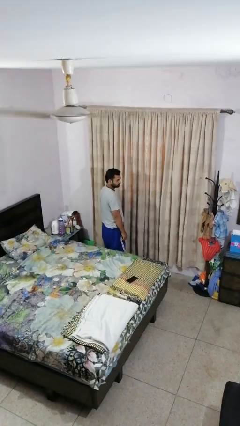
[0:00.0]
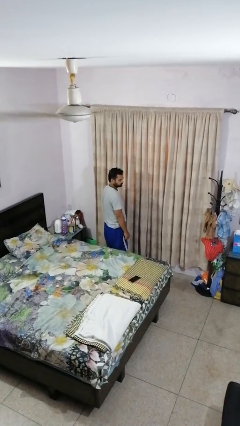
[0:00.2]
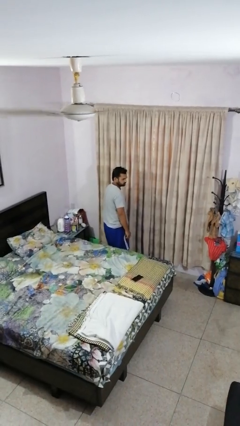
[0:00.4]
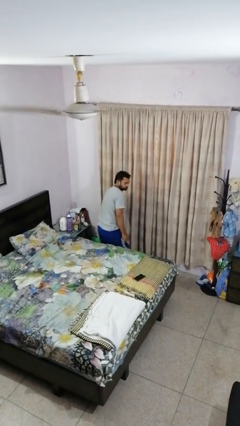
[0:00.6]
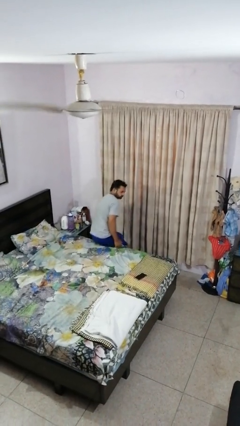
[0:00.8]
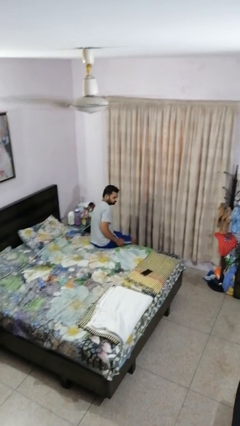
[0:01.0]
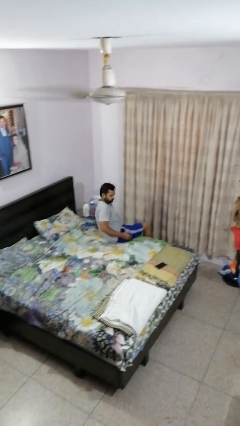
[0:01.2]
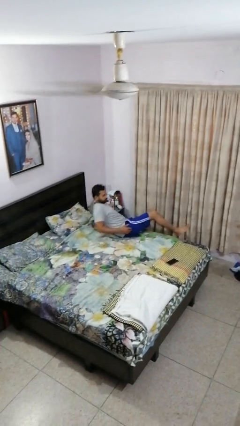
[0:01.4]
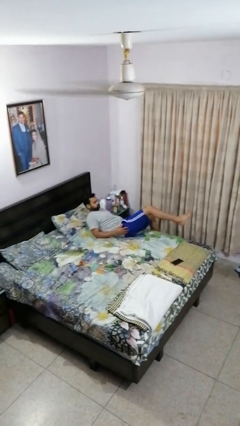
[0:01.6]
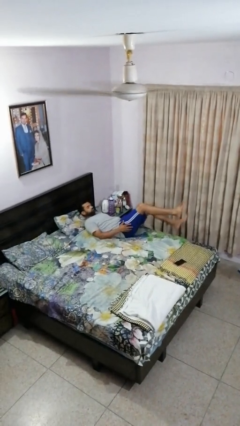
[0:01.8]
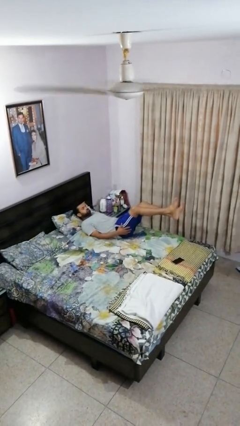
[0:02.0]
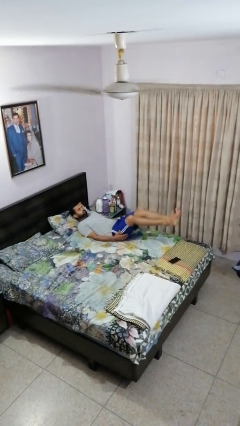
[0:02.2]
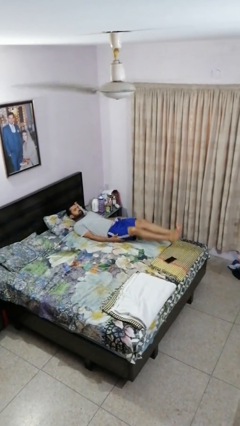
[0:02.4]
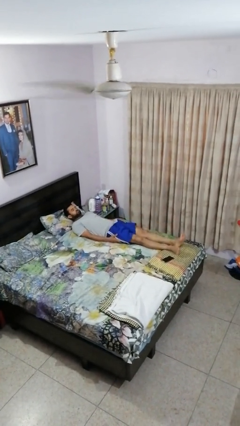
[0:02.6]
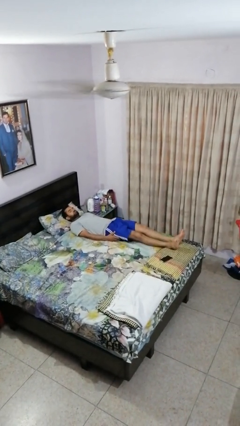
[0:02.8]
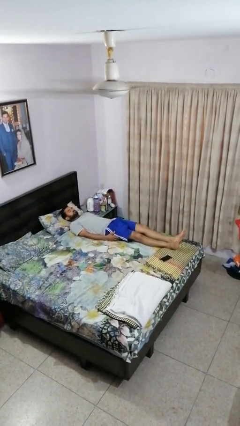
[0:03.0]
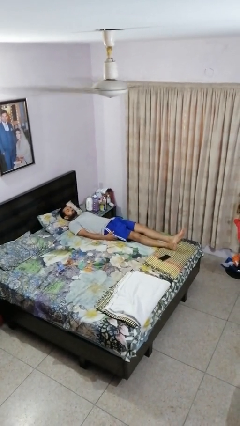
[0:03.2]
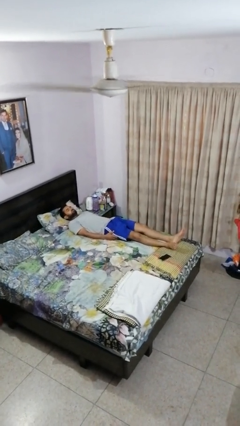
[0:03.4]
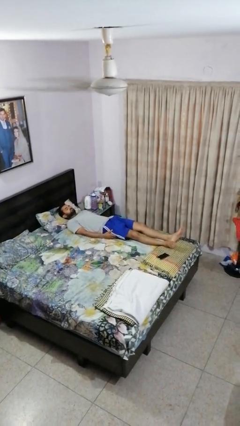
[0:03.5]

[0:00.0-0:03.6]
person lies down on bed

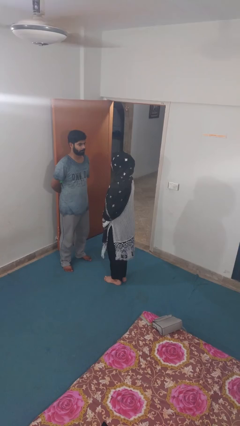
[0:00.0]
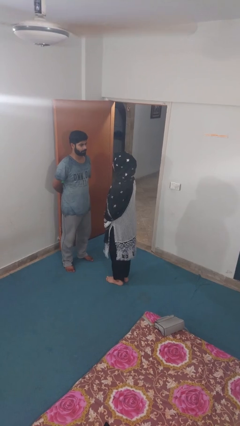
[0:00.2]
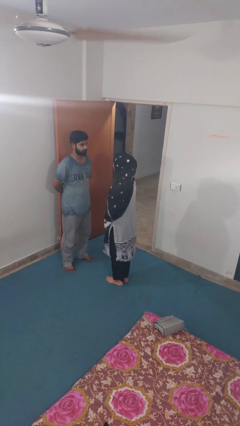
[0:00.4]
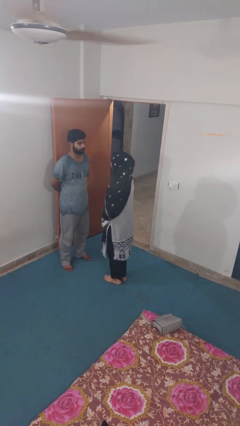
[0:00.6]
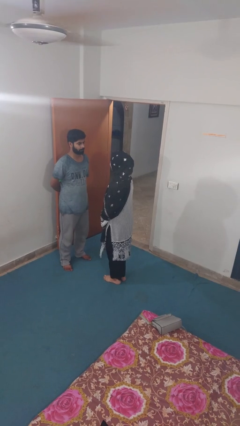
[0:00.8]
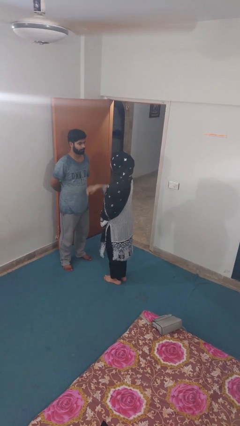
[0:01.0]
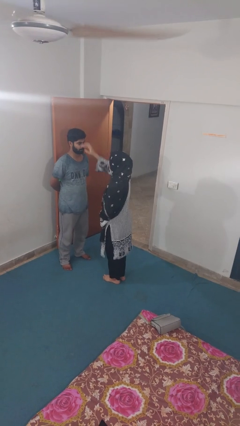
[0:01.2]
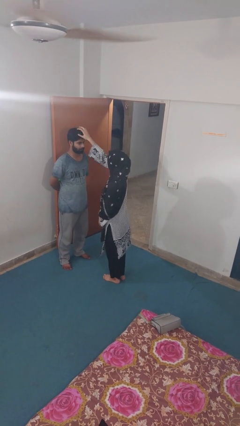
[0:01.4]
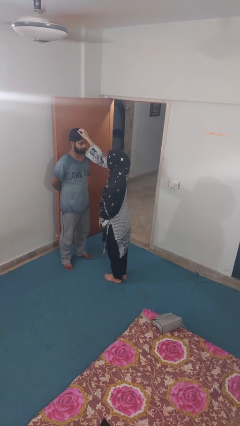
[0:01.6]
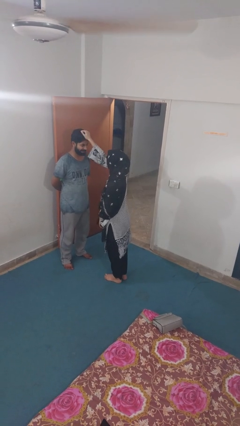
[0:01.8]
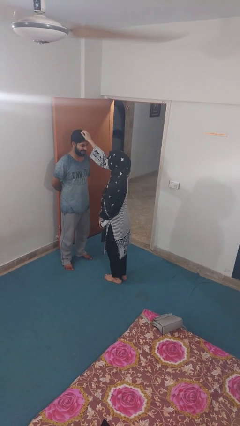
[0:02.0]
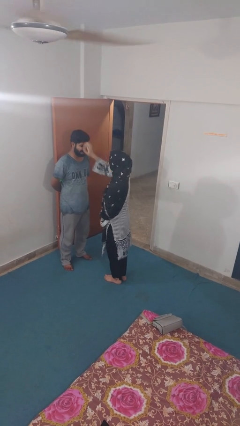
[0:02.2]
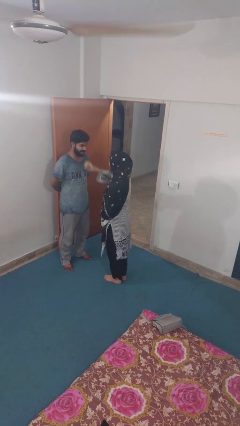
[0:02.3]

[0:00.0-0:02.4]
person grabs person by hair

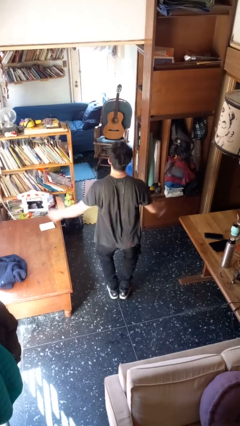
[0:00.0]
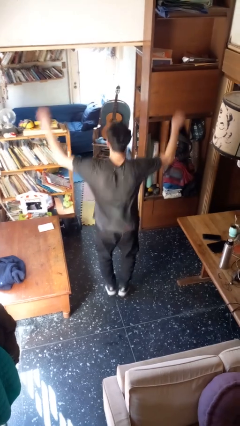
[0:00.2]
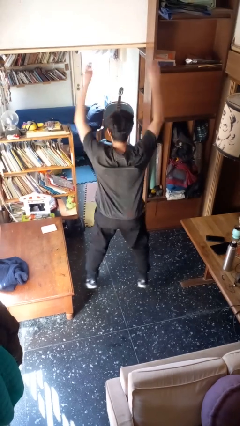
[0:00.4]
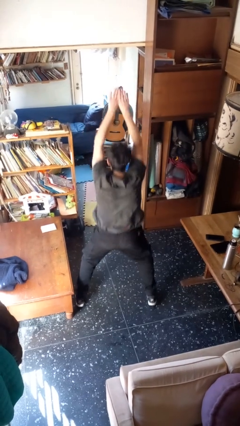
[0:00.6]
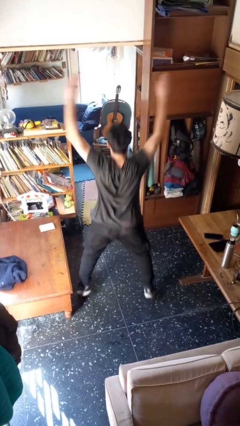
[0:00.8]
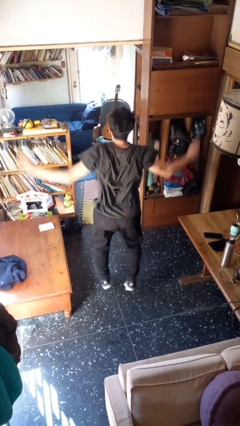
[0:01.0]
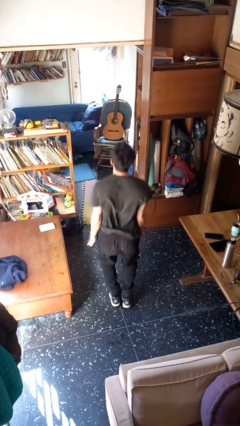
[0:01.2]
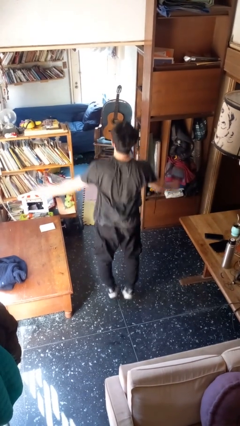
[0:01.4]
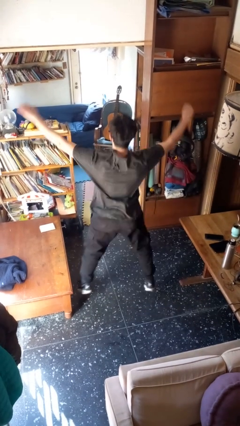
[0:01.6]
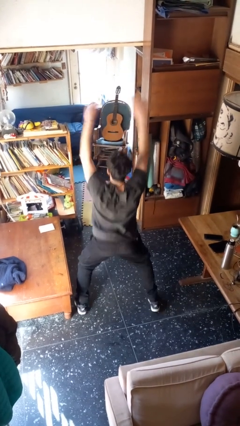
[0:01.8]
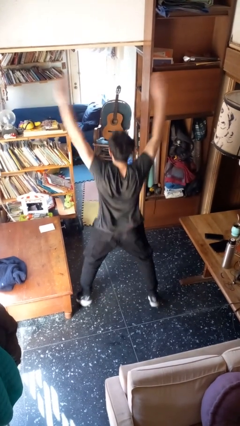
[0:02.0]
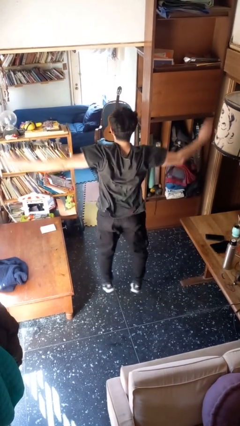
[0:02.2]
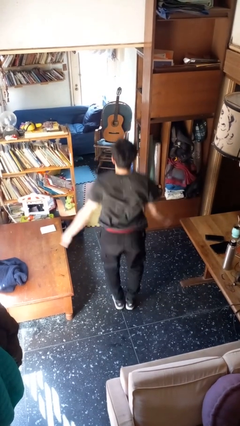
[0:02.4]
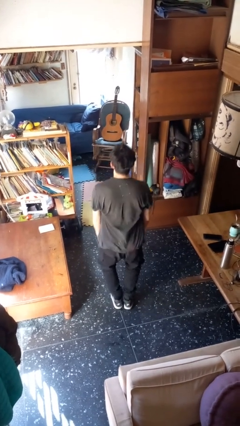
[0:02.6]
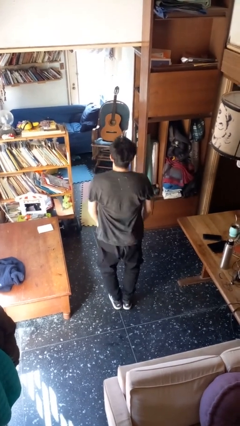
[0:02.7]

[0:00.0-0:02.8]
person exercises with jumping jacks

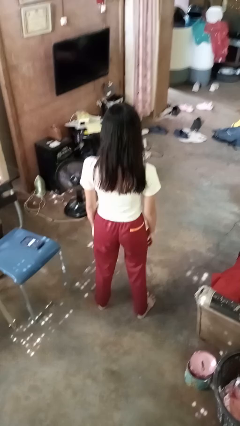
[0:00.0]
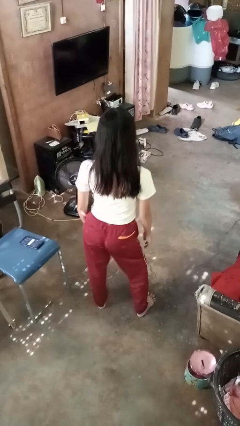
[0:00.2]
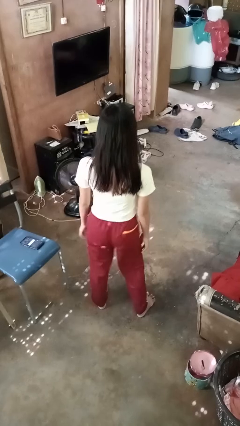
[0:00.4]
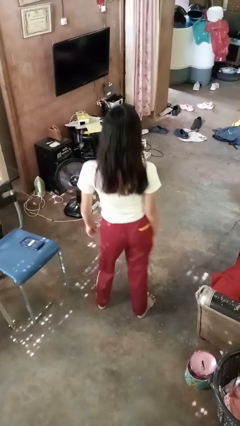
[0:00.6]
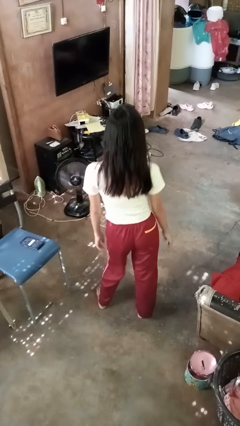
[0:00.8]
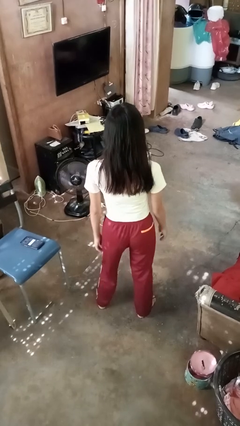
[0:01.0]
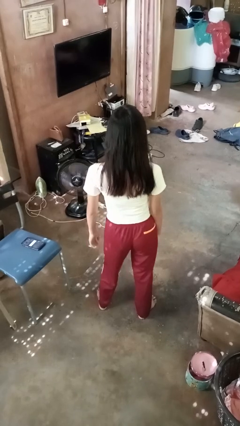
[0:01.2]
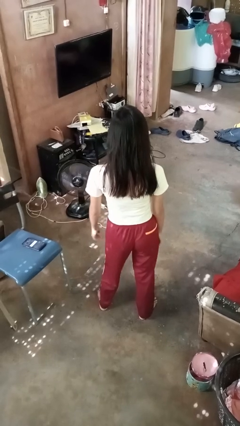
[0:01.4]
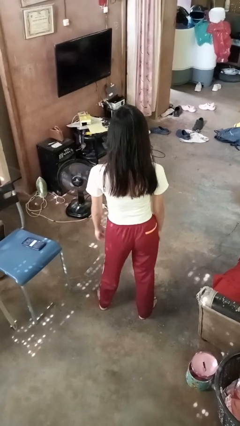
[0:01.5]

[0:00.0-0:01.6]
person wiggles hips

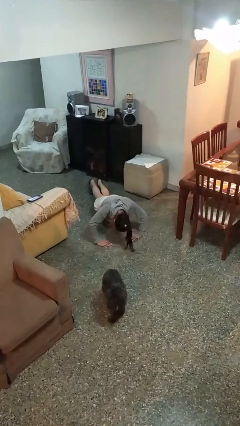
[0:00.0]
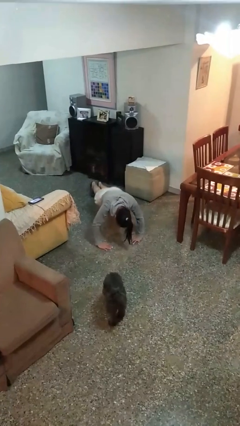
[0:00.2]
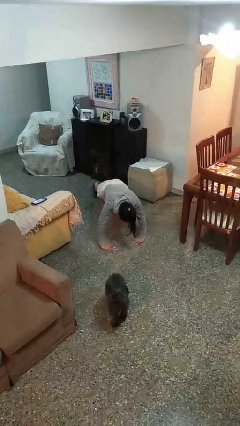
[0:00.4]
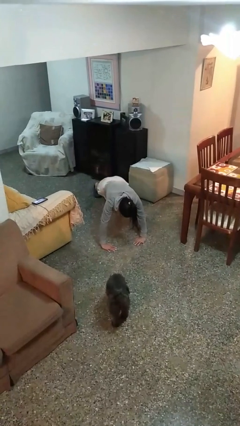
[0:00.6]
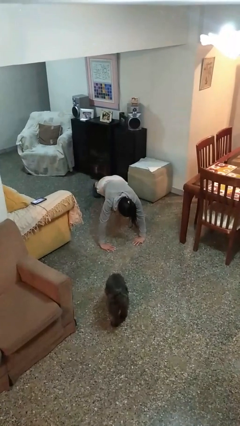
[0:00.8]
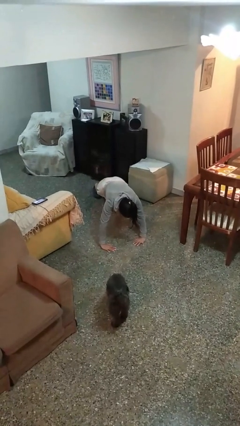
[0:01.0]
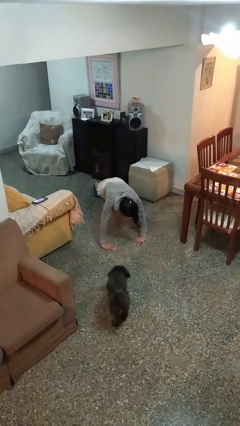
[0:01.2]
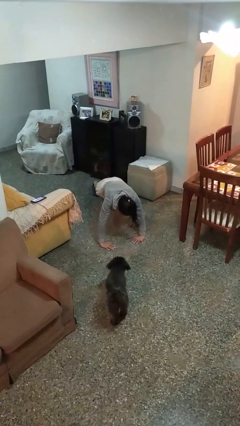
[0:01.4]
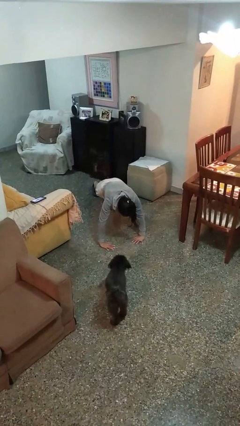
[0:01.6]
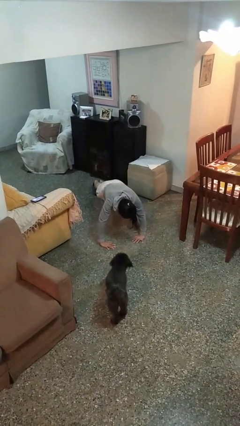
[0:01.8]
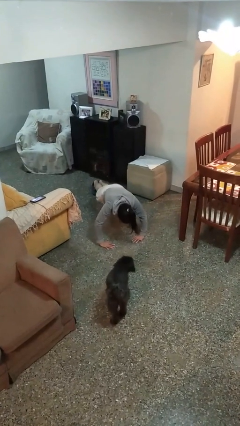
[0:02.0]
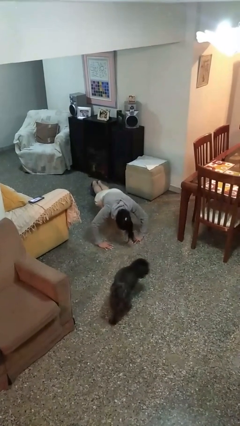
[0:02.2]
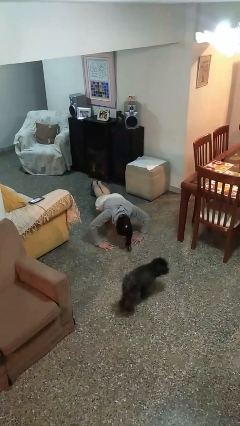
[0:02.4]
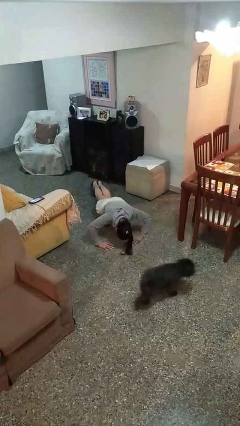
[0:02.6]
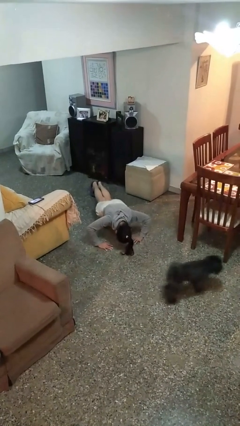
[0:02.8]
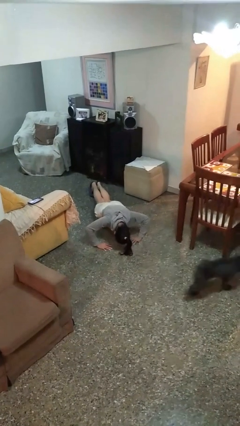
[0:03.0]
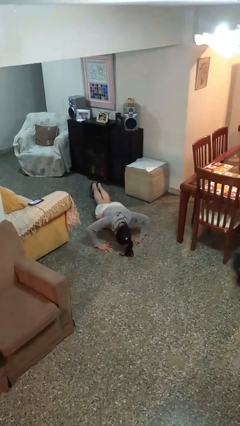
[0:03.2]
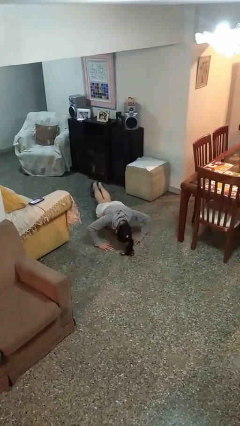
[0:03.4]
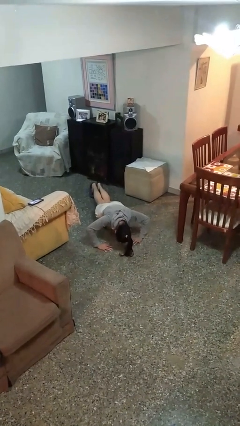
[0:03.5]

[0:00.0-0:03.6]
person exercises with pushup

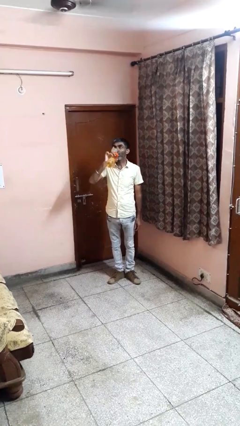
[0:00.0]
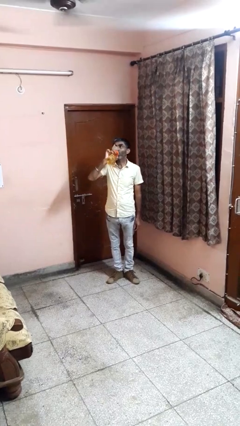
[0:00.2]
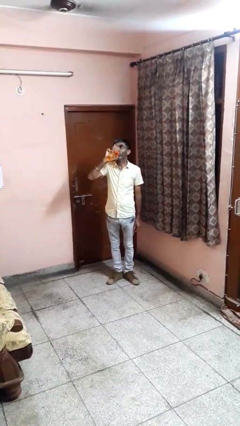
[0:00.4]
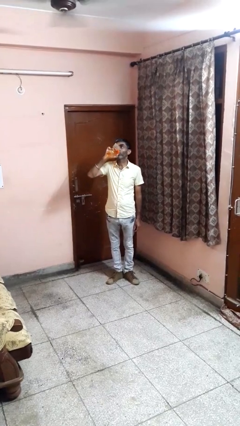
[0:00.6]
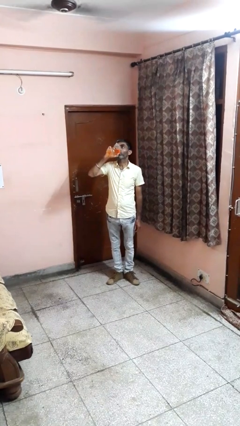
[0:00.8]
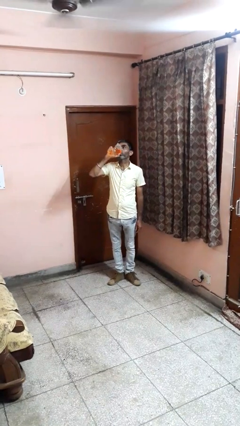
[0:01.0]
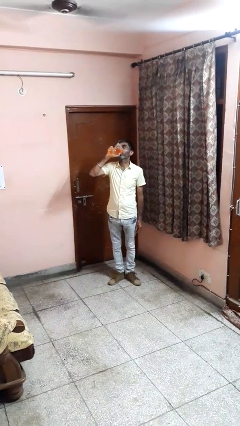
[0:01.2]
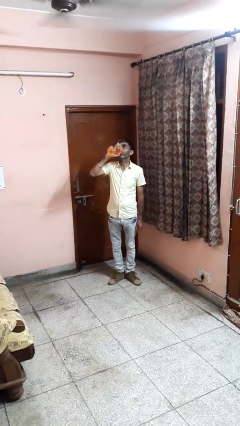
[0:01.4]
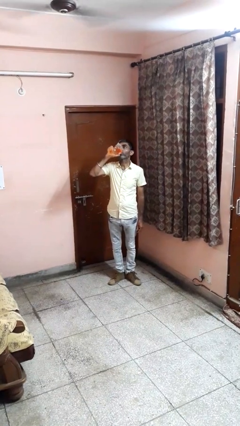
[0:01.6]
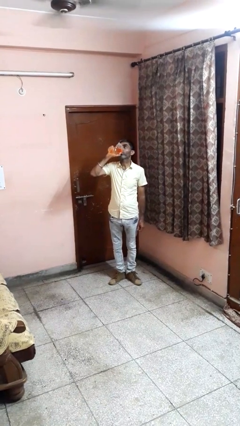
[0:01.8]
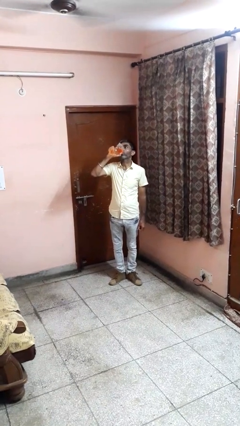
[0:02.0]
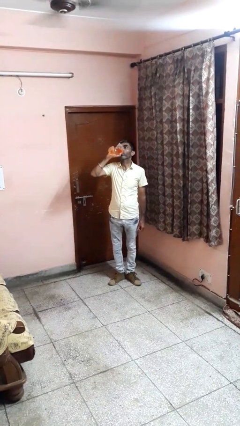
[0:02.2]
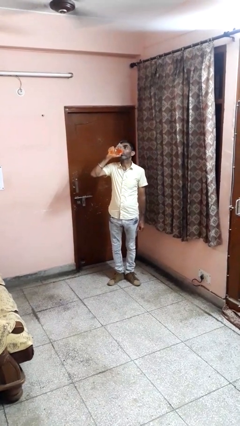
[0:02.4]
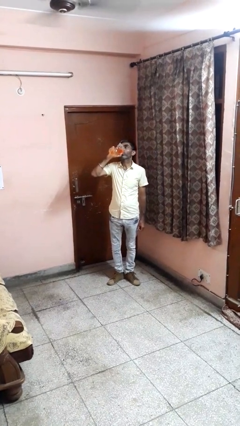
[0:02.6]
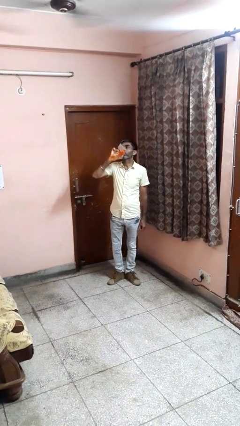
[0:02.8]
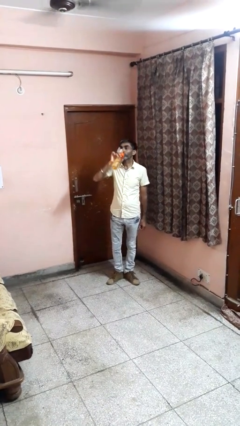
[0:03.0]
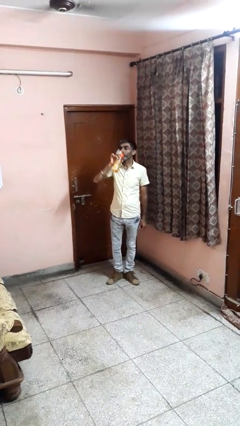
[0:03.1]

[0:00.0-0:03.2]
person drinks from bottle
